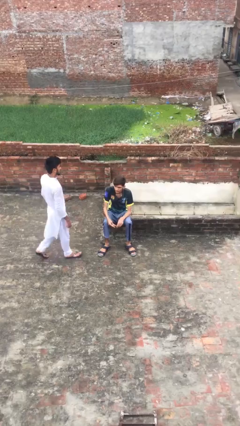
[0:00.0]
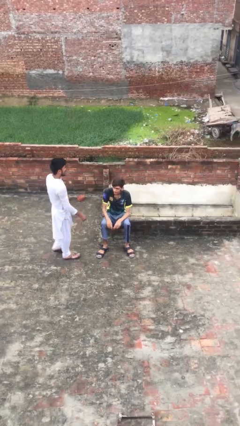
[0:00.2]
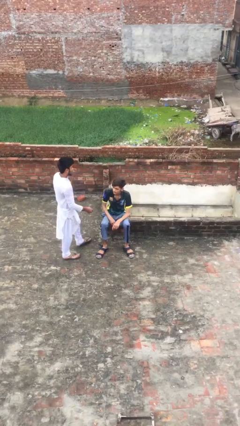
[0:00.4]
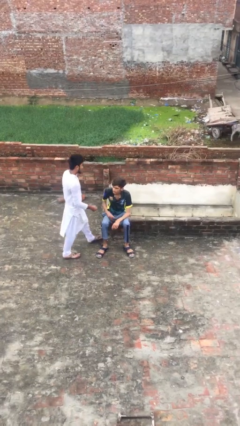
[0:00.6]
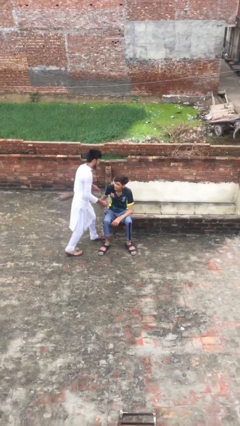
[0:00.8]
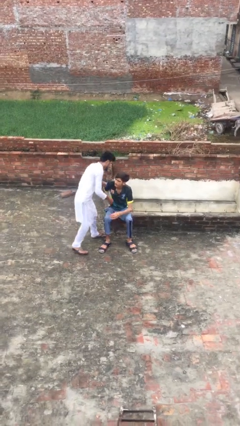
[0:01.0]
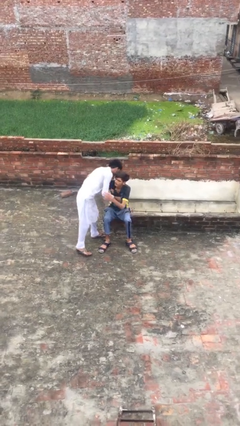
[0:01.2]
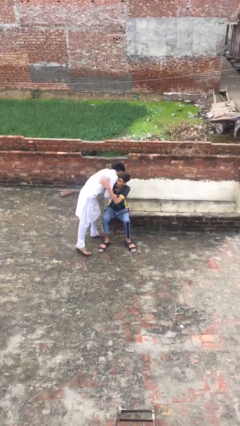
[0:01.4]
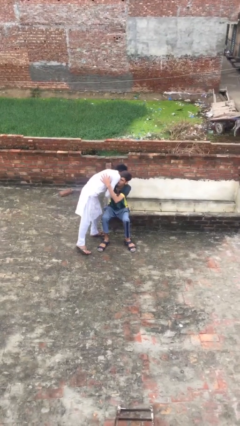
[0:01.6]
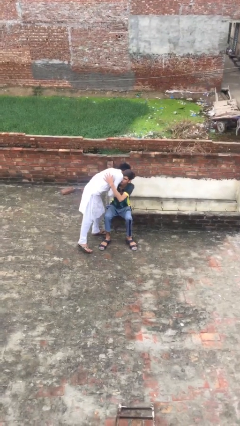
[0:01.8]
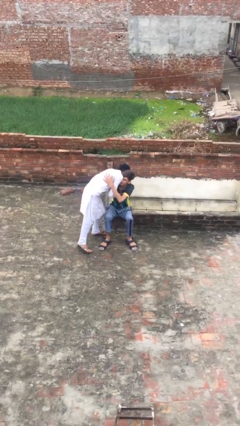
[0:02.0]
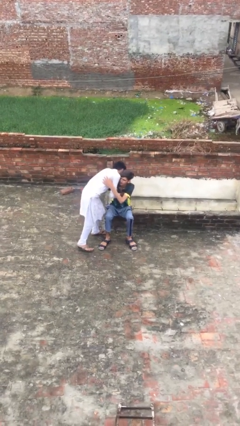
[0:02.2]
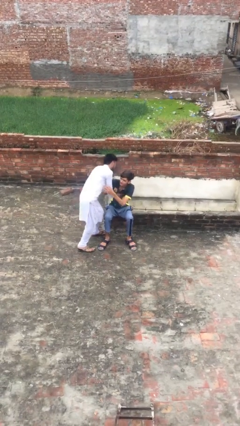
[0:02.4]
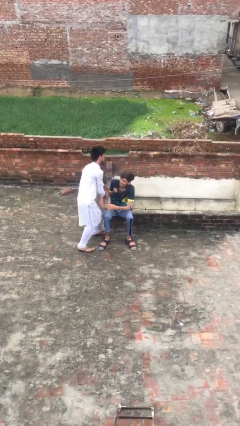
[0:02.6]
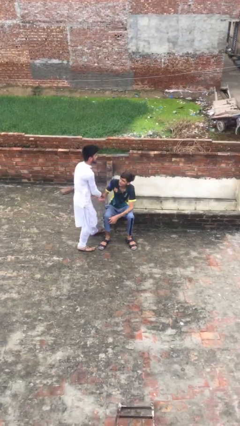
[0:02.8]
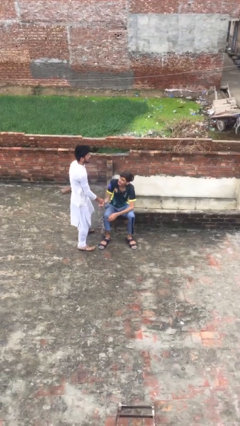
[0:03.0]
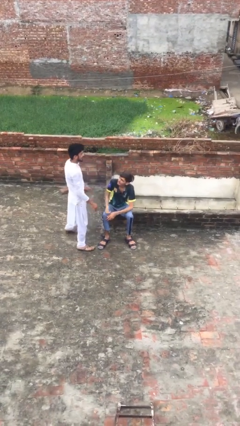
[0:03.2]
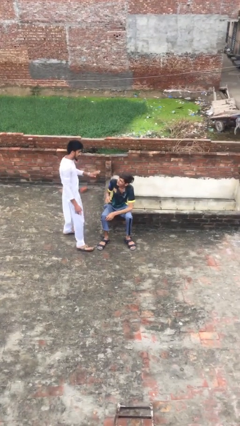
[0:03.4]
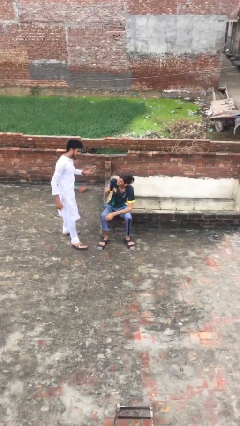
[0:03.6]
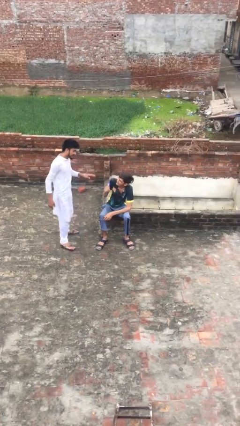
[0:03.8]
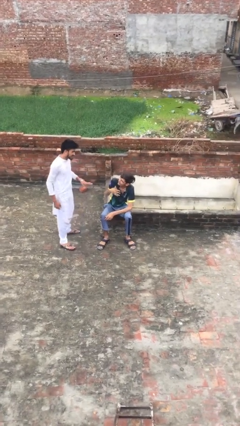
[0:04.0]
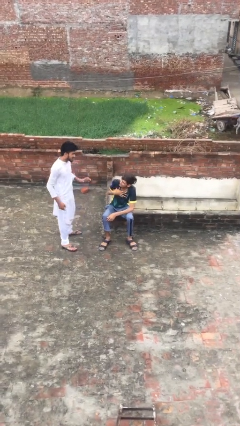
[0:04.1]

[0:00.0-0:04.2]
person embraces person

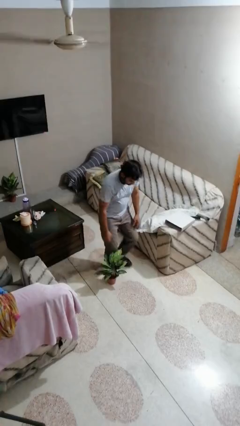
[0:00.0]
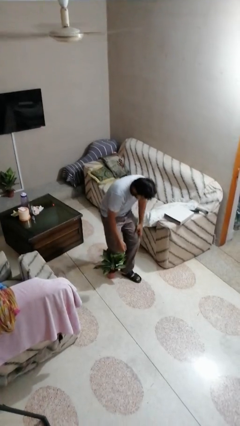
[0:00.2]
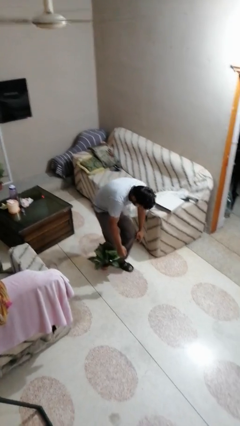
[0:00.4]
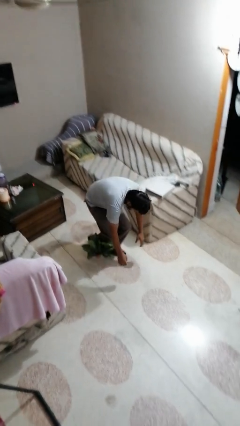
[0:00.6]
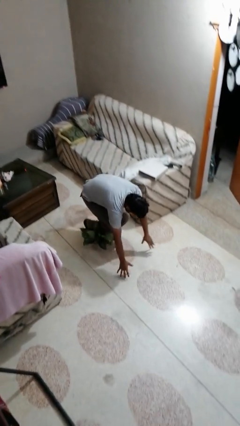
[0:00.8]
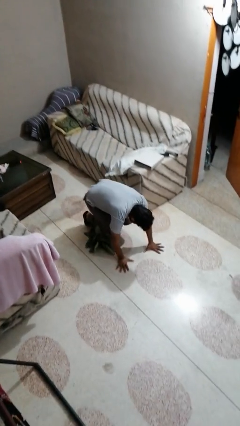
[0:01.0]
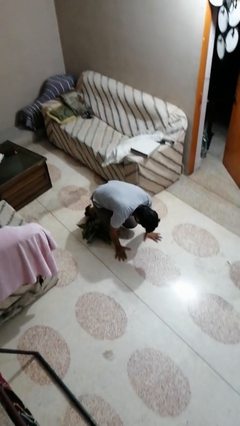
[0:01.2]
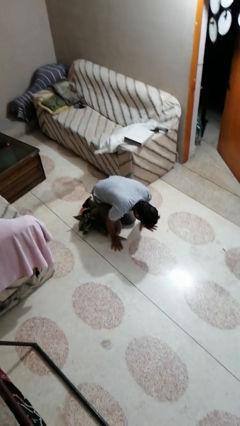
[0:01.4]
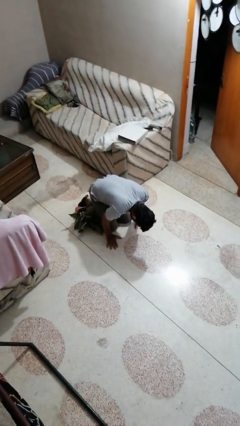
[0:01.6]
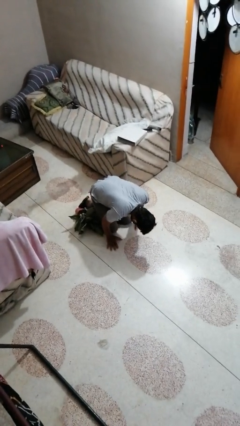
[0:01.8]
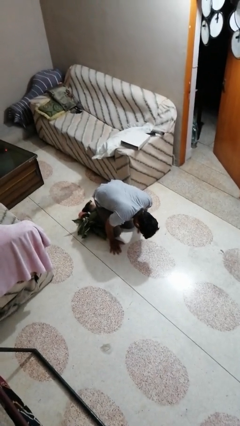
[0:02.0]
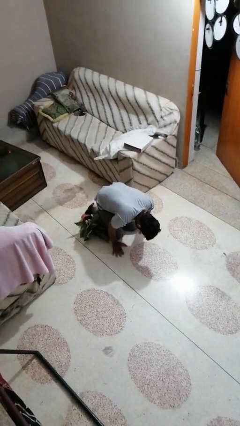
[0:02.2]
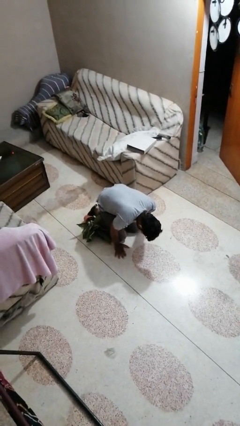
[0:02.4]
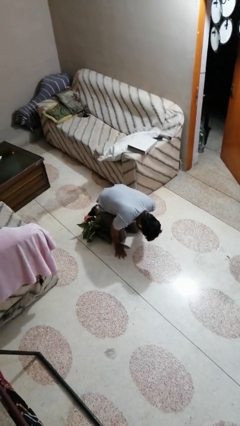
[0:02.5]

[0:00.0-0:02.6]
person trips on object on floor

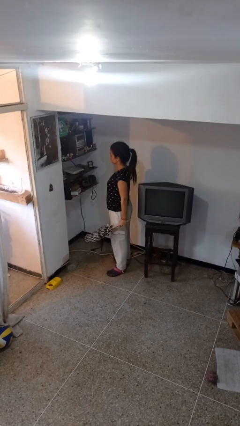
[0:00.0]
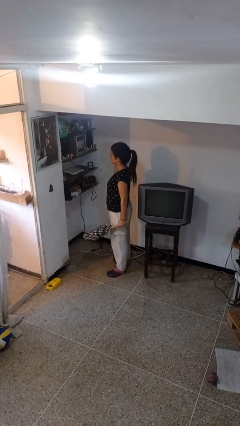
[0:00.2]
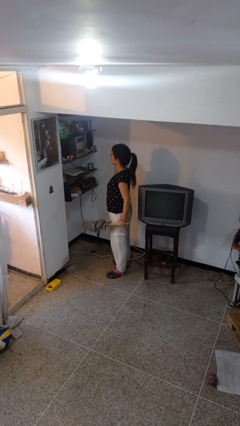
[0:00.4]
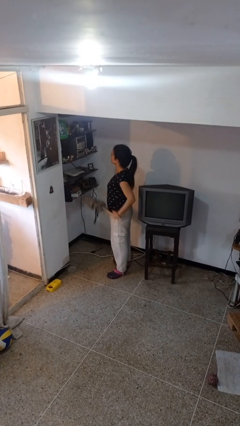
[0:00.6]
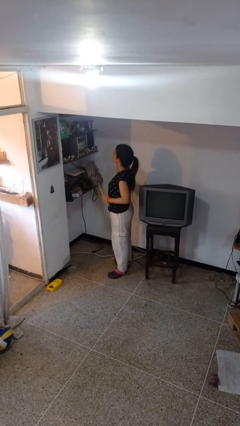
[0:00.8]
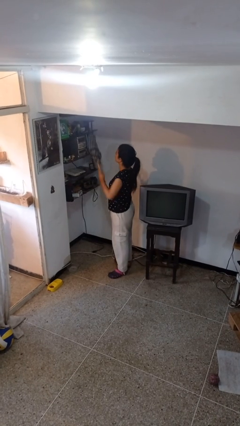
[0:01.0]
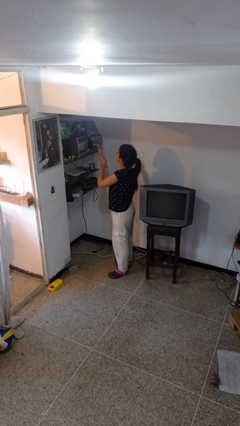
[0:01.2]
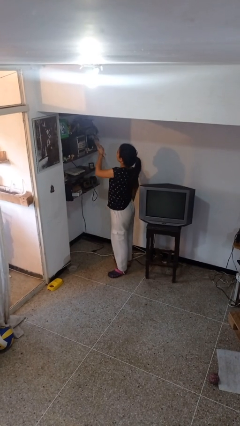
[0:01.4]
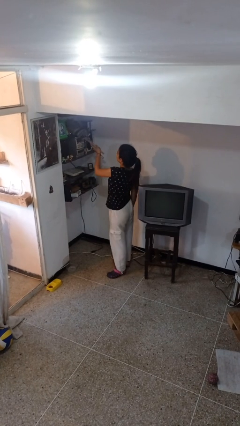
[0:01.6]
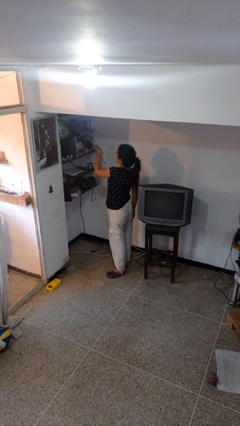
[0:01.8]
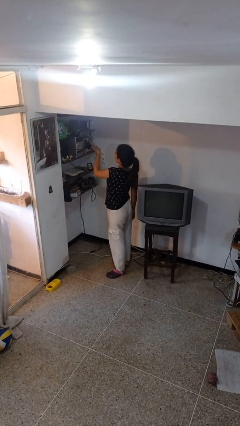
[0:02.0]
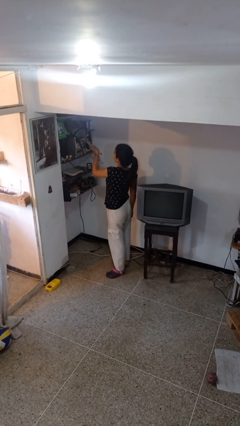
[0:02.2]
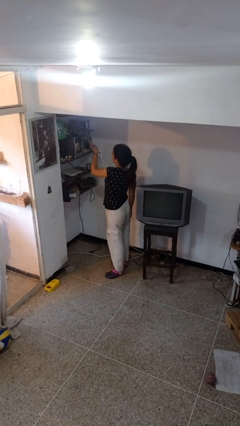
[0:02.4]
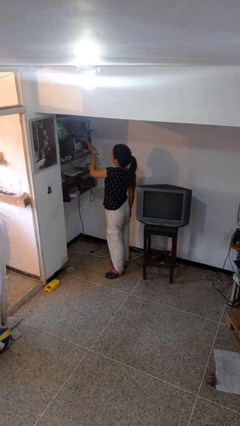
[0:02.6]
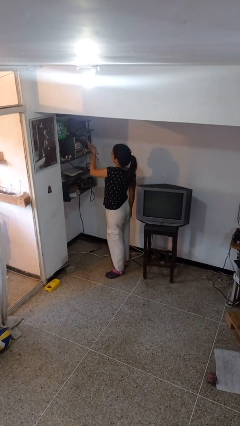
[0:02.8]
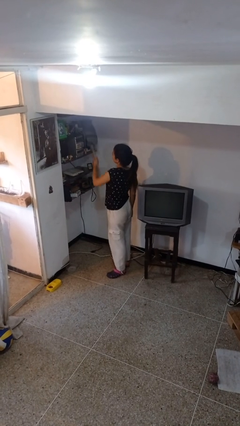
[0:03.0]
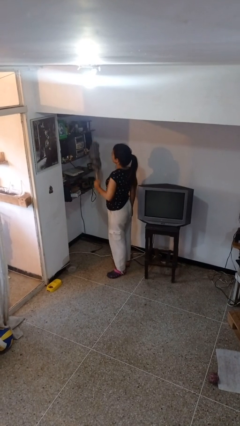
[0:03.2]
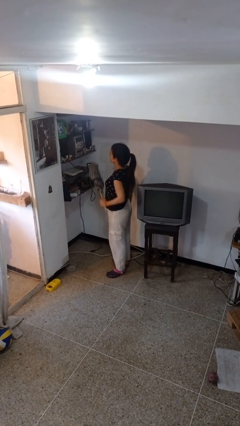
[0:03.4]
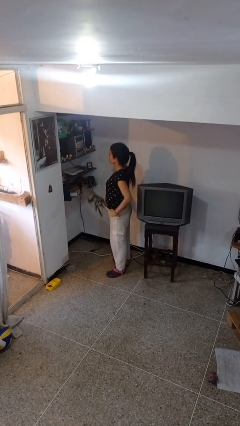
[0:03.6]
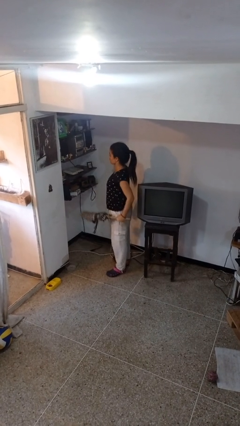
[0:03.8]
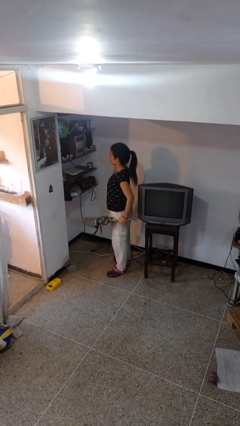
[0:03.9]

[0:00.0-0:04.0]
person dusts furniture

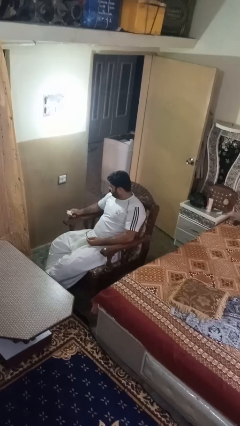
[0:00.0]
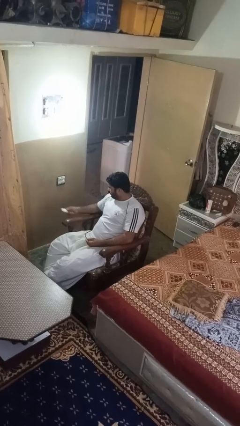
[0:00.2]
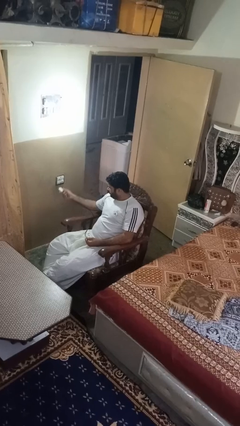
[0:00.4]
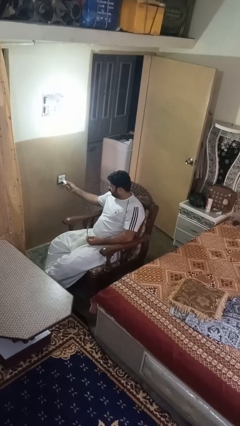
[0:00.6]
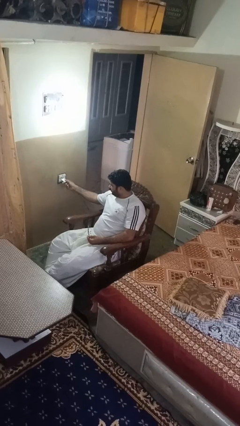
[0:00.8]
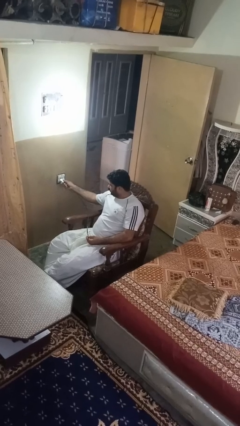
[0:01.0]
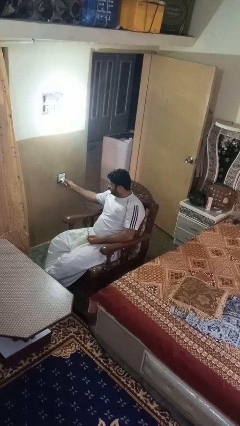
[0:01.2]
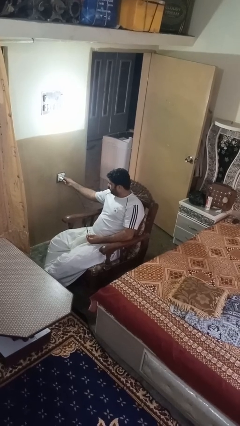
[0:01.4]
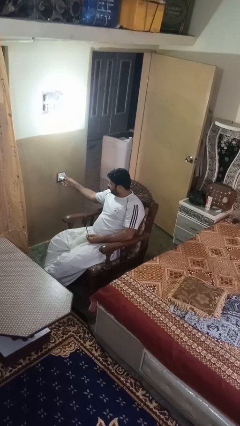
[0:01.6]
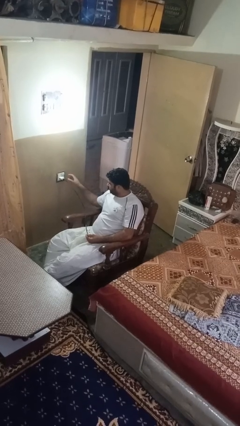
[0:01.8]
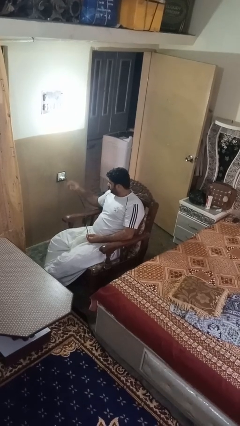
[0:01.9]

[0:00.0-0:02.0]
person plugs into electrical socket

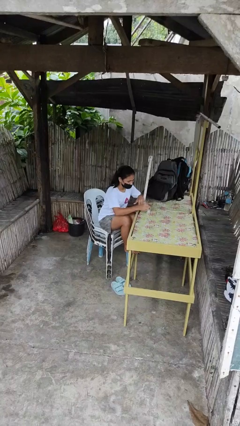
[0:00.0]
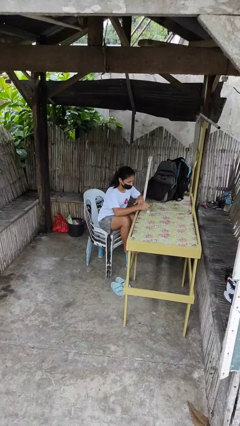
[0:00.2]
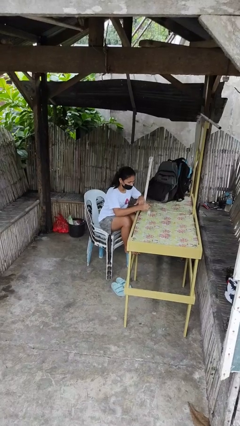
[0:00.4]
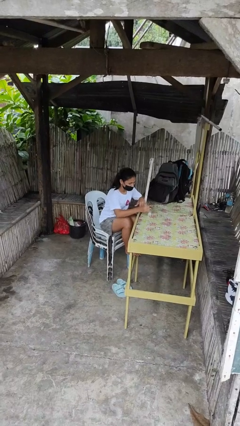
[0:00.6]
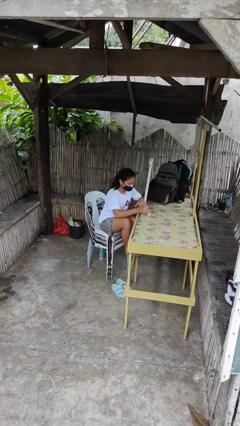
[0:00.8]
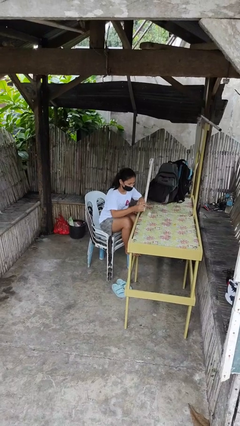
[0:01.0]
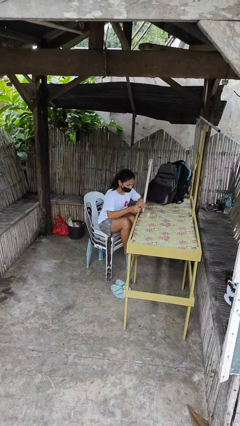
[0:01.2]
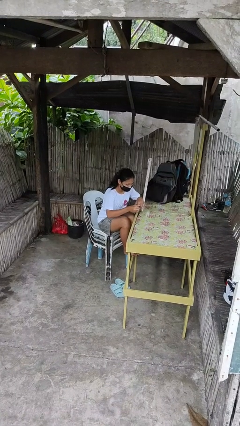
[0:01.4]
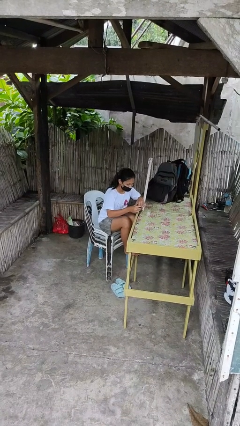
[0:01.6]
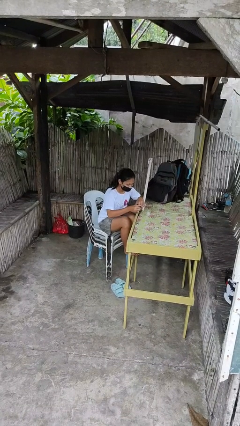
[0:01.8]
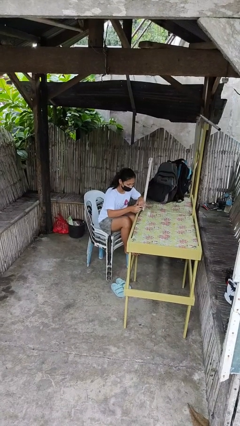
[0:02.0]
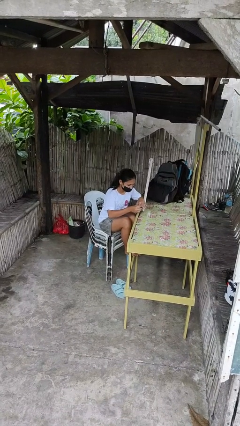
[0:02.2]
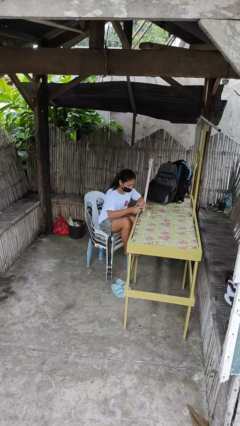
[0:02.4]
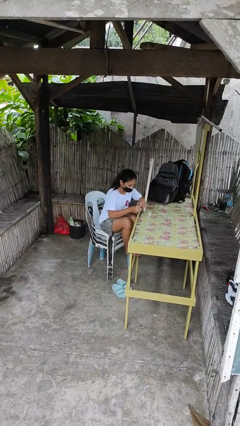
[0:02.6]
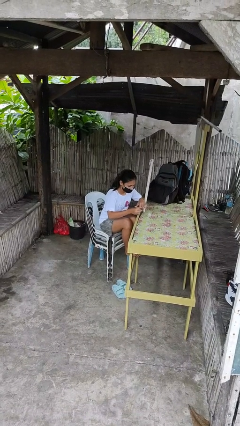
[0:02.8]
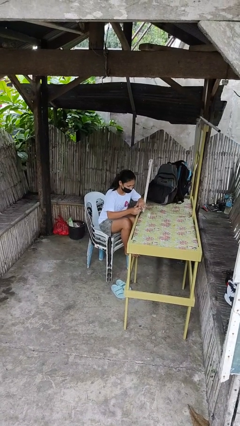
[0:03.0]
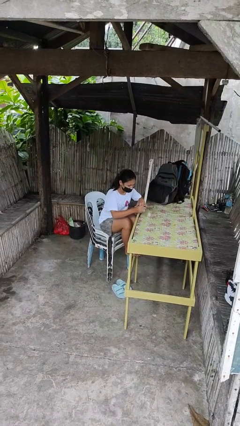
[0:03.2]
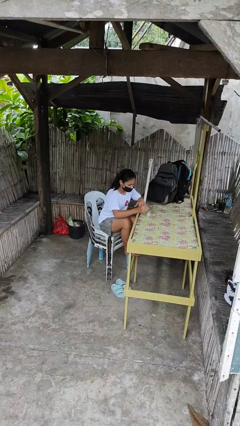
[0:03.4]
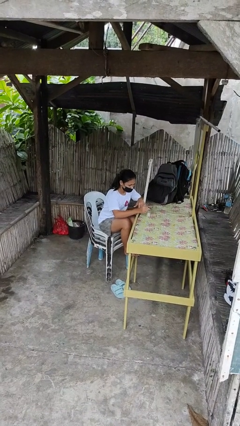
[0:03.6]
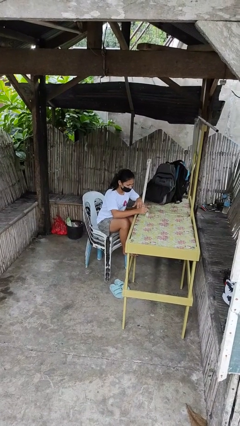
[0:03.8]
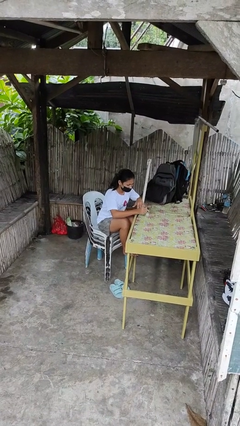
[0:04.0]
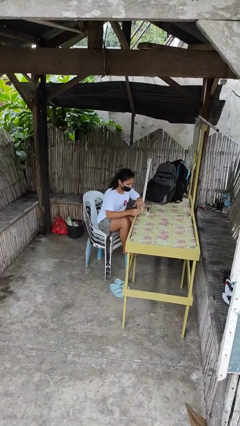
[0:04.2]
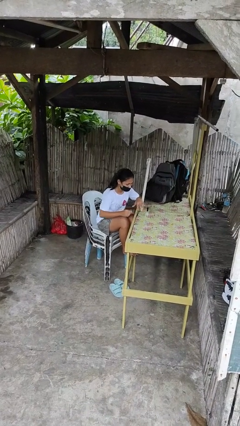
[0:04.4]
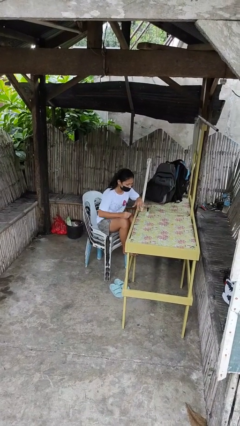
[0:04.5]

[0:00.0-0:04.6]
person paints fingernails
